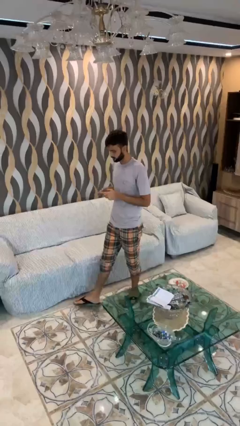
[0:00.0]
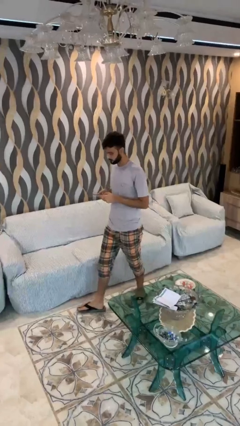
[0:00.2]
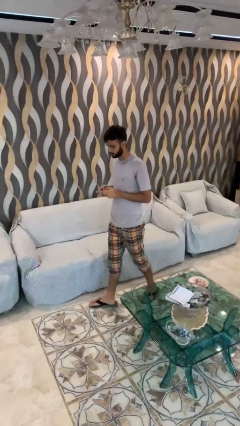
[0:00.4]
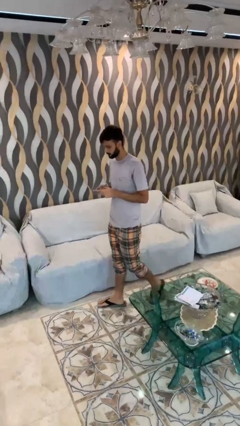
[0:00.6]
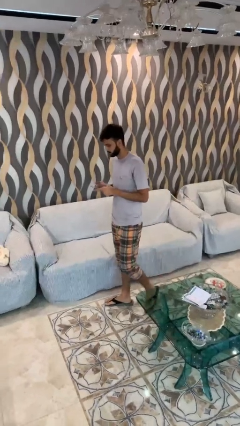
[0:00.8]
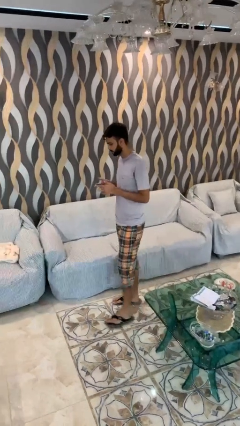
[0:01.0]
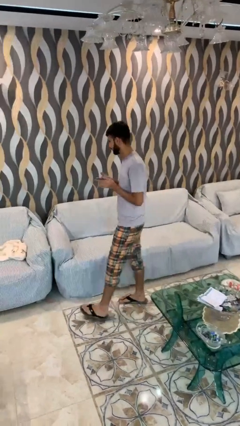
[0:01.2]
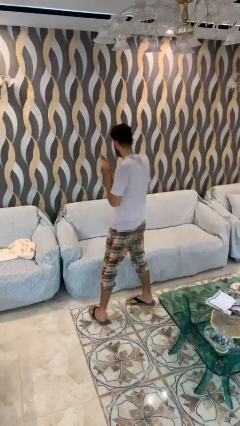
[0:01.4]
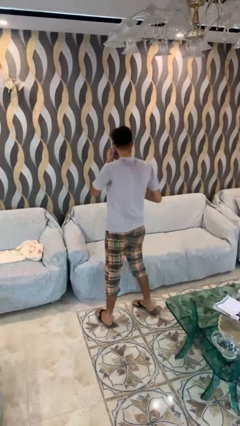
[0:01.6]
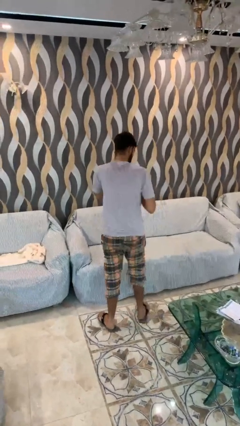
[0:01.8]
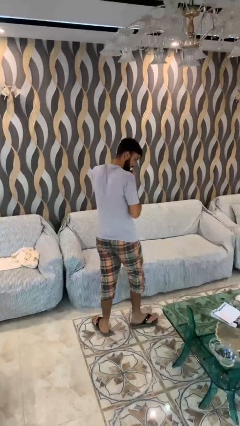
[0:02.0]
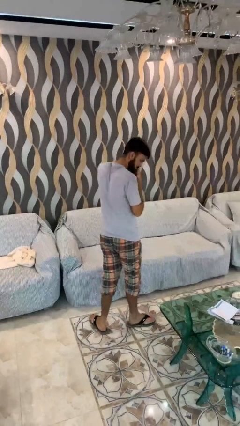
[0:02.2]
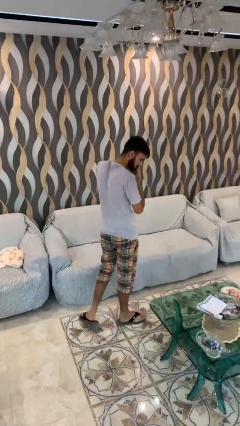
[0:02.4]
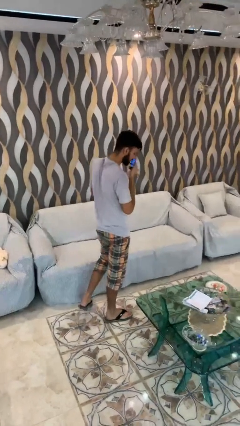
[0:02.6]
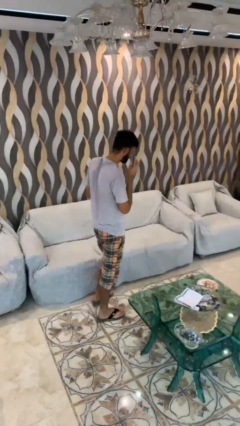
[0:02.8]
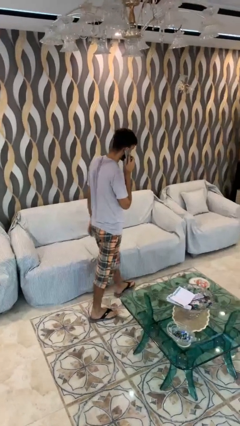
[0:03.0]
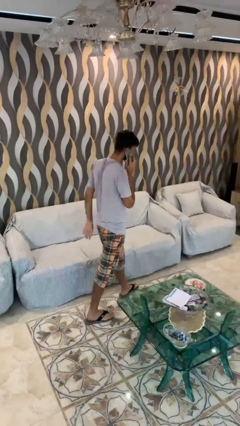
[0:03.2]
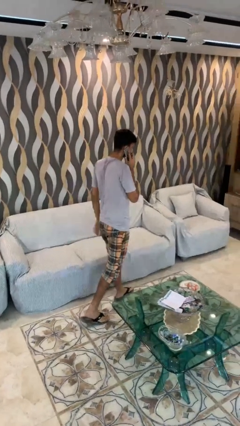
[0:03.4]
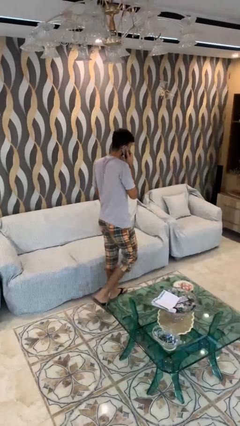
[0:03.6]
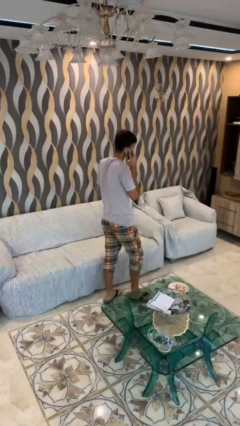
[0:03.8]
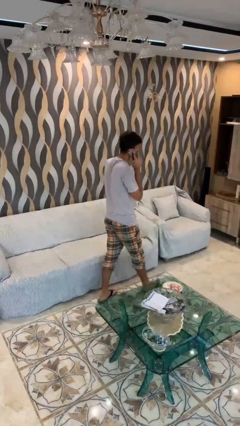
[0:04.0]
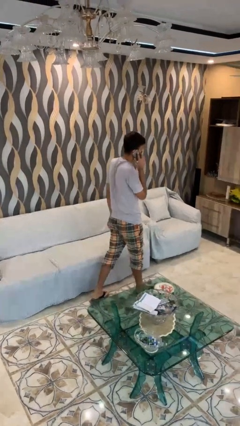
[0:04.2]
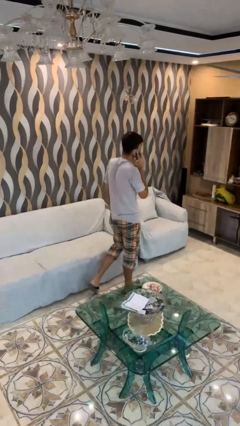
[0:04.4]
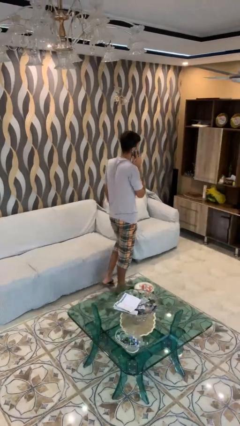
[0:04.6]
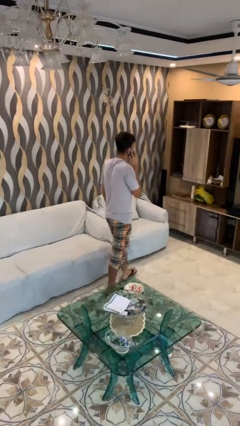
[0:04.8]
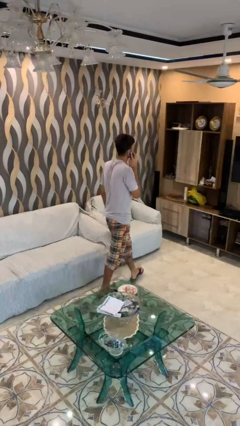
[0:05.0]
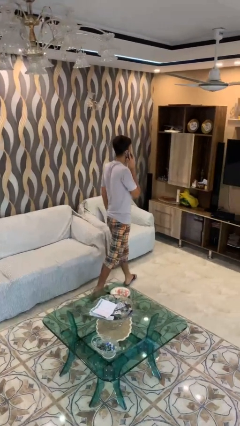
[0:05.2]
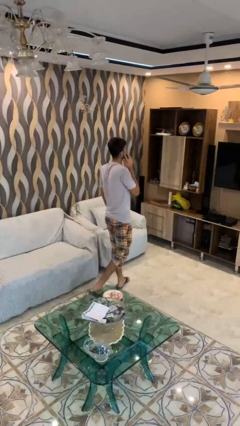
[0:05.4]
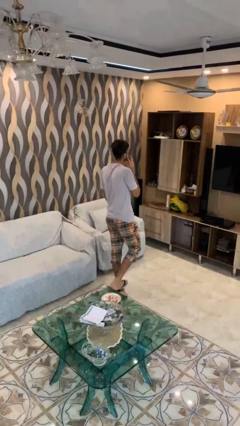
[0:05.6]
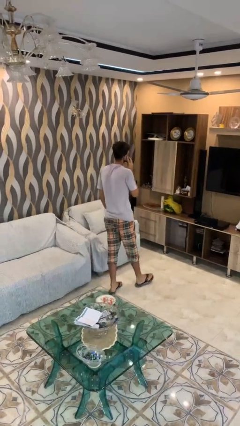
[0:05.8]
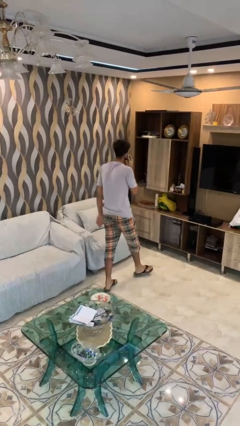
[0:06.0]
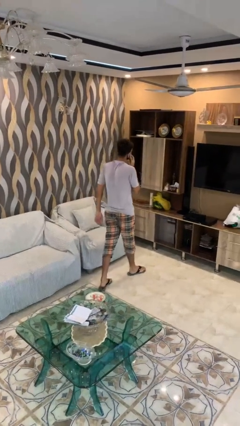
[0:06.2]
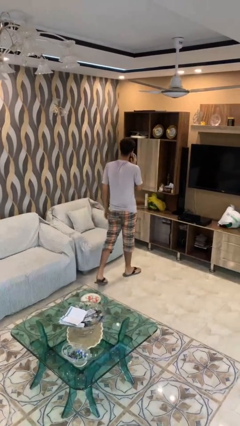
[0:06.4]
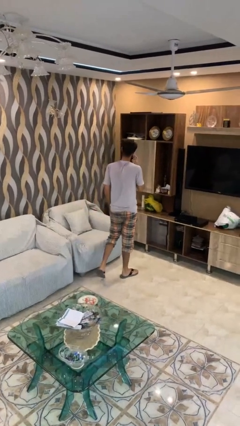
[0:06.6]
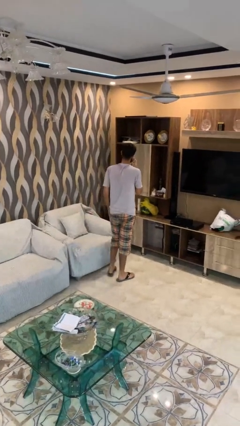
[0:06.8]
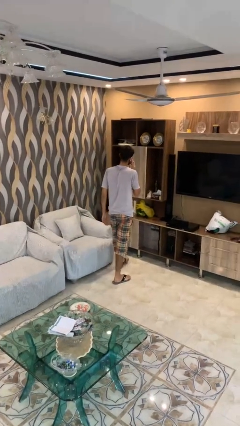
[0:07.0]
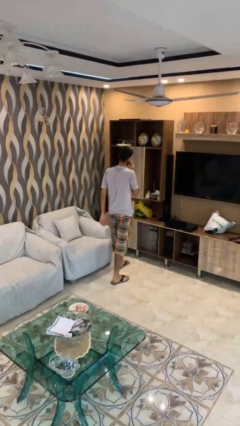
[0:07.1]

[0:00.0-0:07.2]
person talks on phone

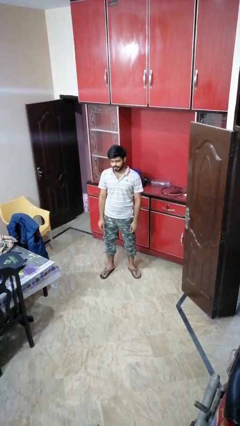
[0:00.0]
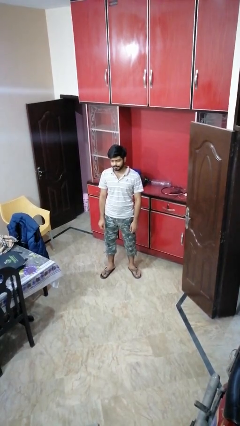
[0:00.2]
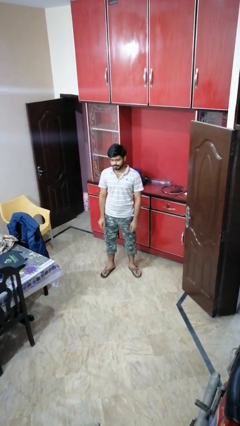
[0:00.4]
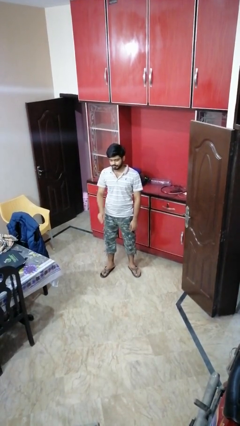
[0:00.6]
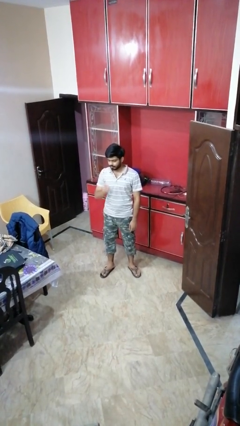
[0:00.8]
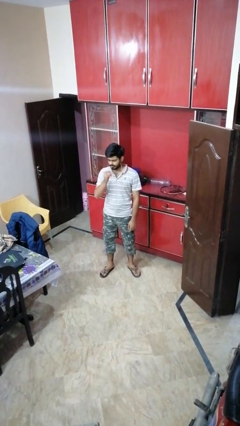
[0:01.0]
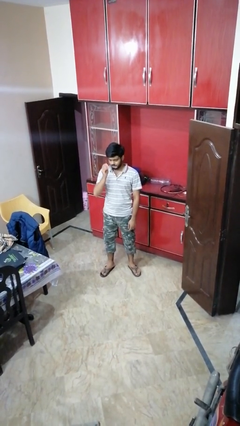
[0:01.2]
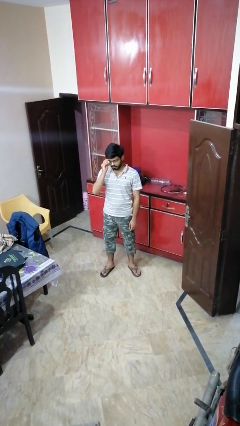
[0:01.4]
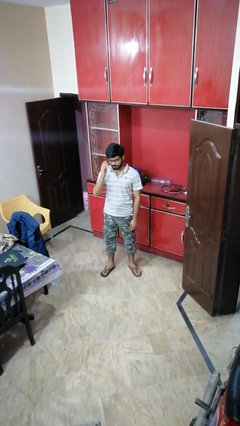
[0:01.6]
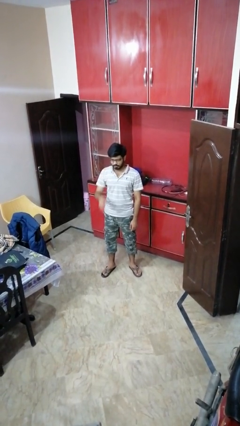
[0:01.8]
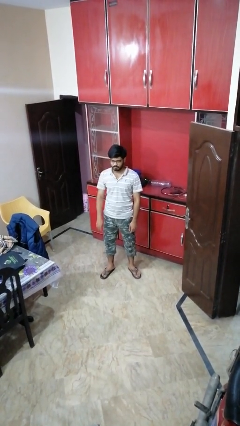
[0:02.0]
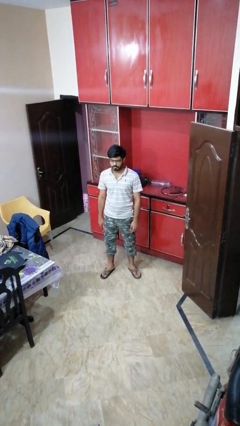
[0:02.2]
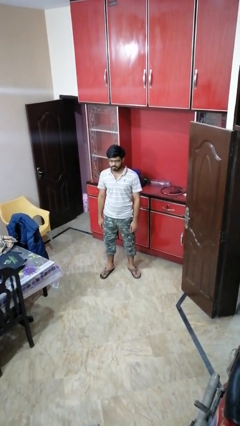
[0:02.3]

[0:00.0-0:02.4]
person puts on glasses

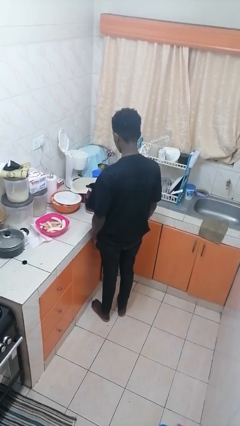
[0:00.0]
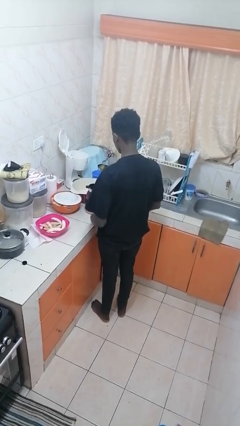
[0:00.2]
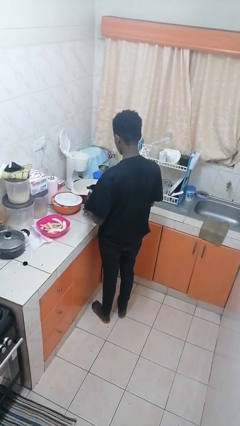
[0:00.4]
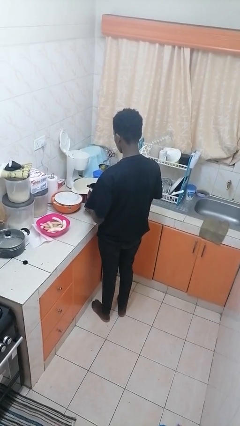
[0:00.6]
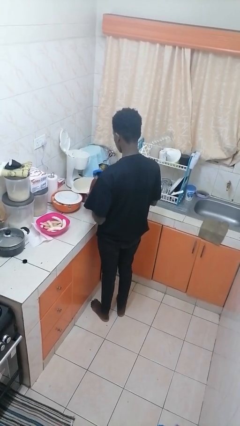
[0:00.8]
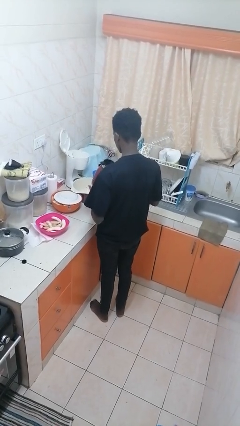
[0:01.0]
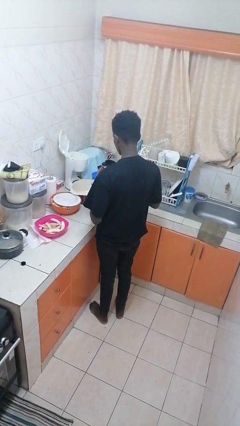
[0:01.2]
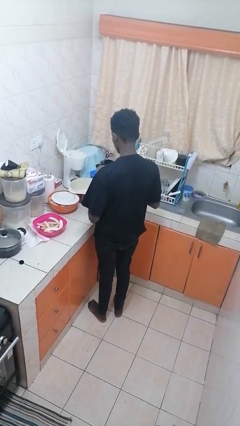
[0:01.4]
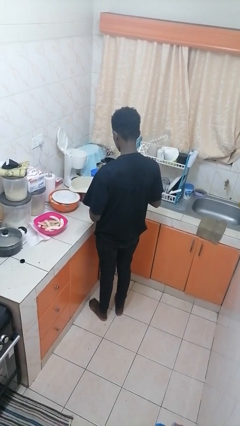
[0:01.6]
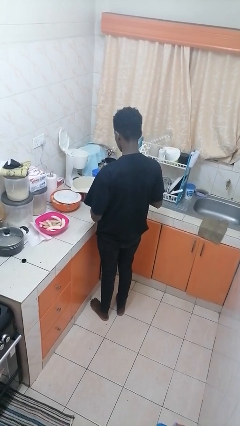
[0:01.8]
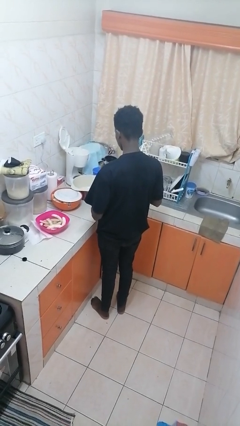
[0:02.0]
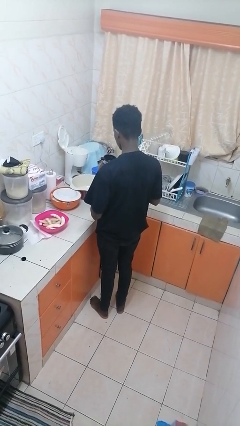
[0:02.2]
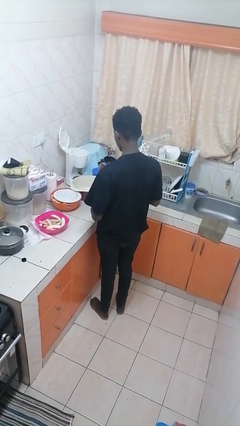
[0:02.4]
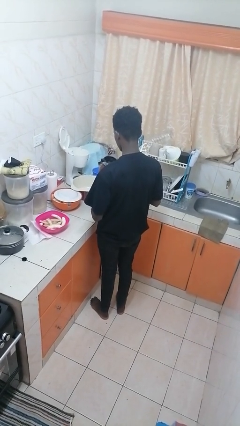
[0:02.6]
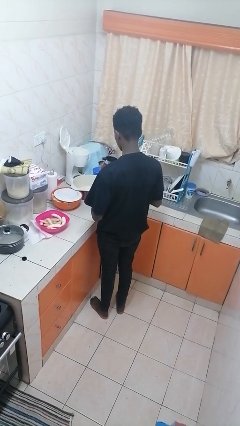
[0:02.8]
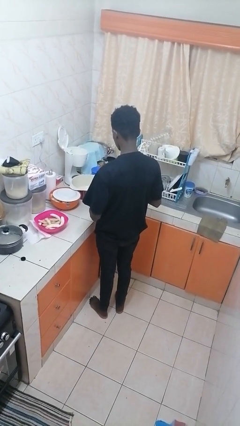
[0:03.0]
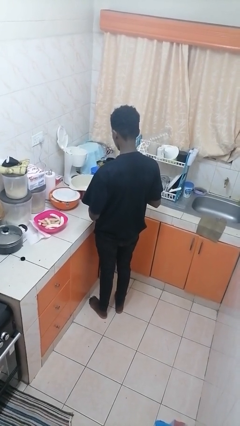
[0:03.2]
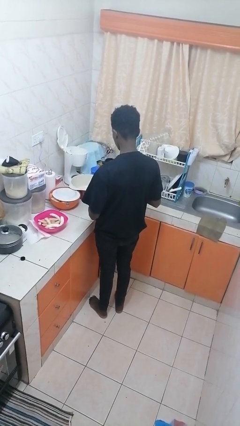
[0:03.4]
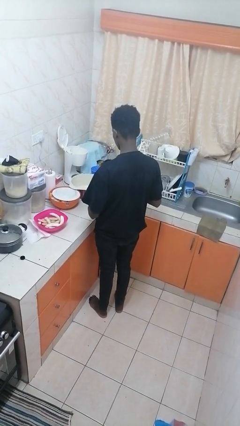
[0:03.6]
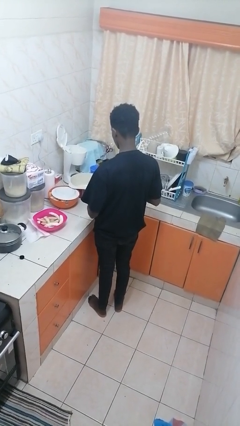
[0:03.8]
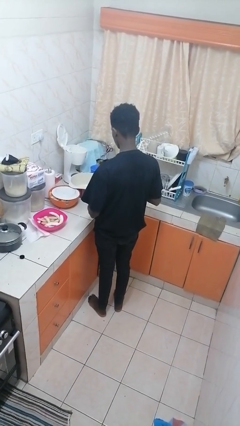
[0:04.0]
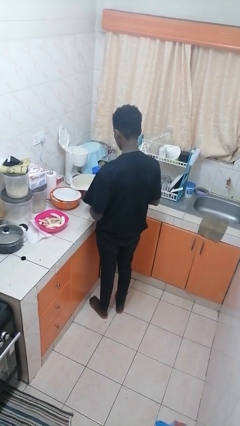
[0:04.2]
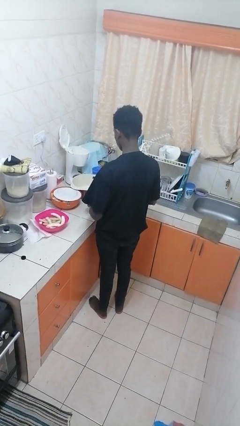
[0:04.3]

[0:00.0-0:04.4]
person picks up object from countertop

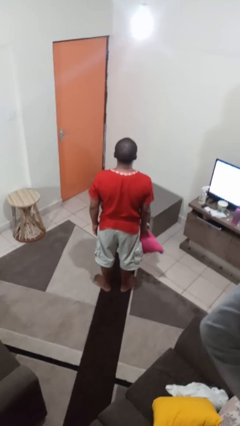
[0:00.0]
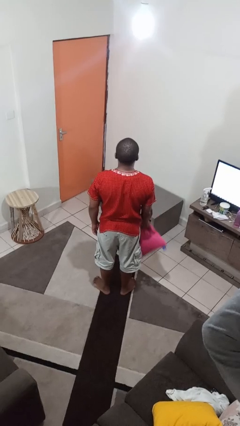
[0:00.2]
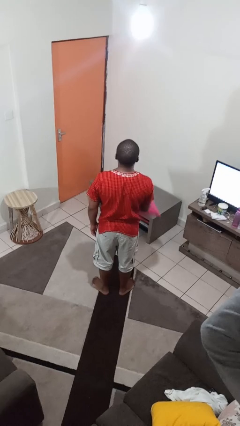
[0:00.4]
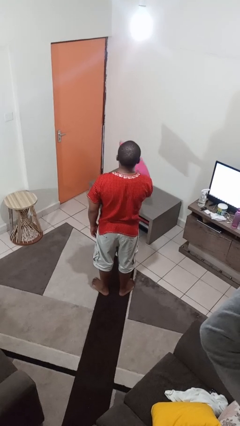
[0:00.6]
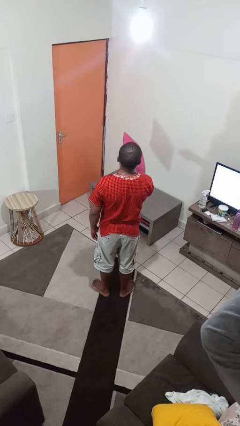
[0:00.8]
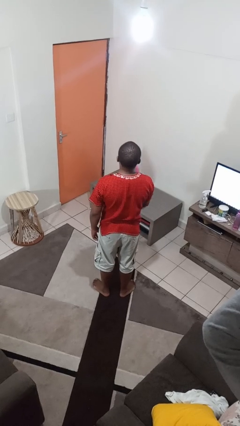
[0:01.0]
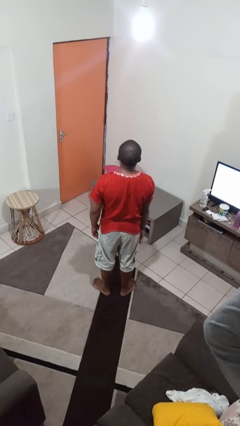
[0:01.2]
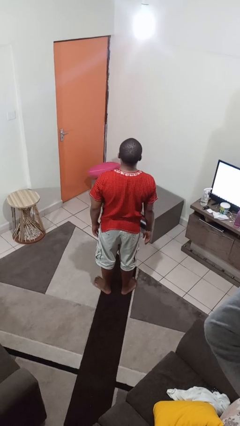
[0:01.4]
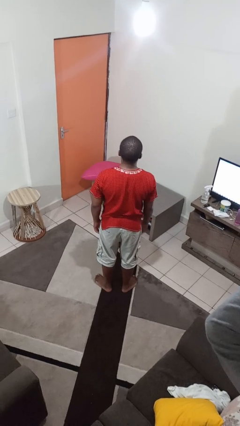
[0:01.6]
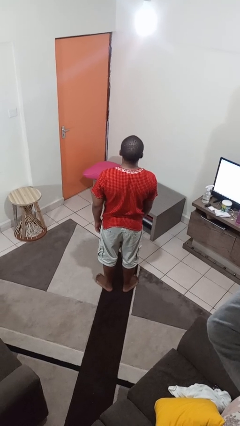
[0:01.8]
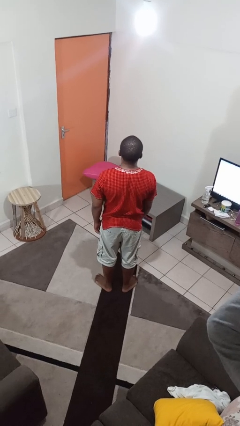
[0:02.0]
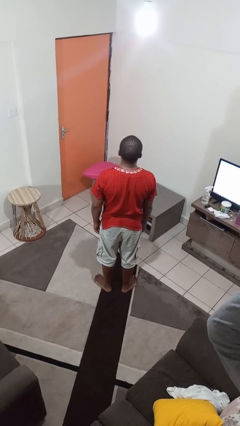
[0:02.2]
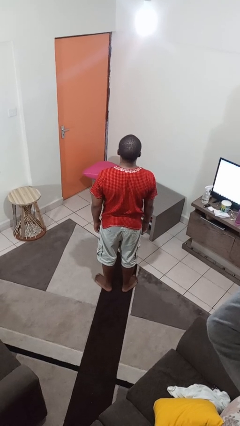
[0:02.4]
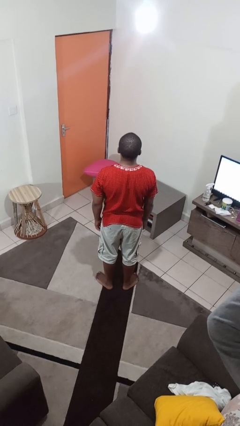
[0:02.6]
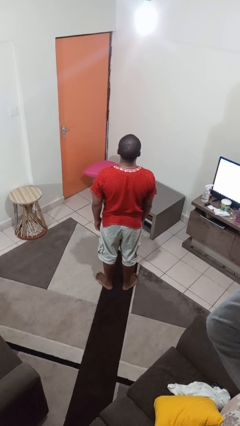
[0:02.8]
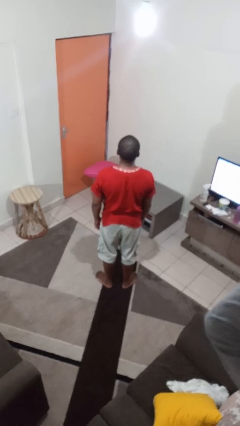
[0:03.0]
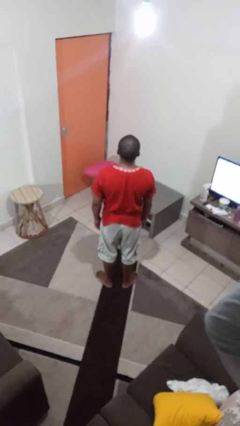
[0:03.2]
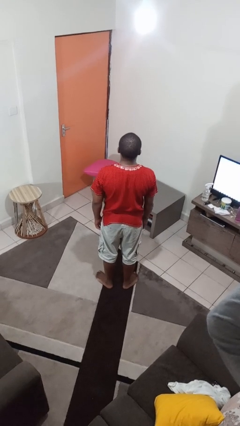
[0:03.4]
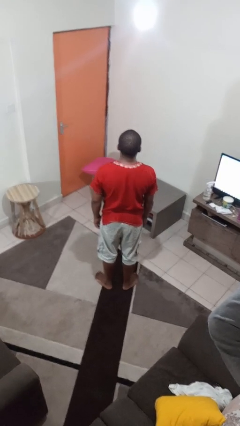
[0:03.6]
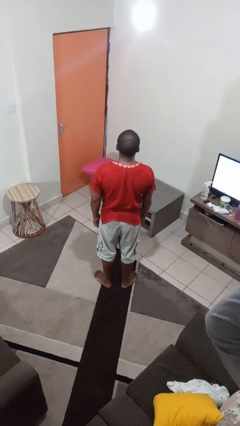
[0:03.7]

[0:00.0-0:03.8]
person throws object on table

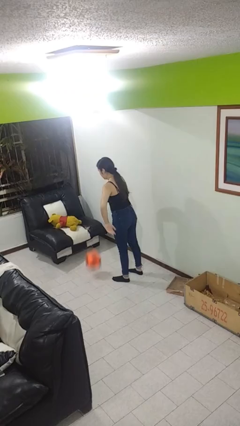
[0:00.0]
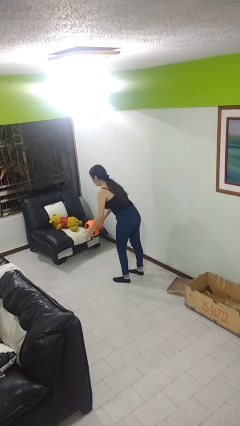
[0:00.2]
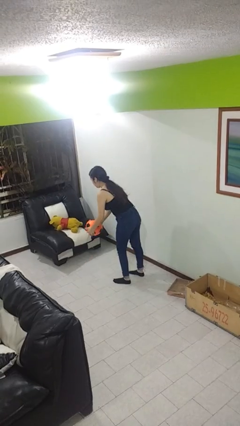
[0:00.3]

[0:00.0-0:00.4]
person bounces ball on floor
